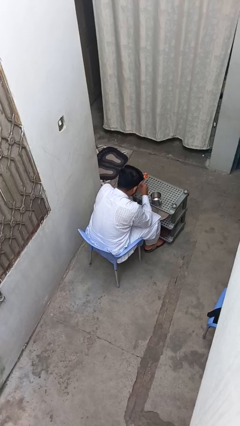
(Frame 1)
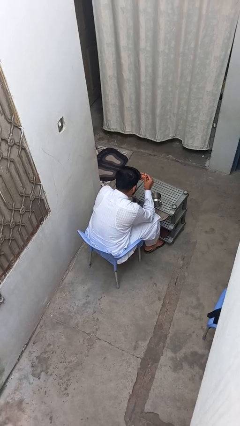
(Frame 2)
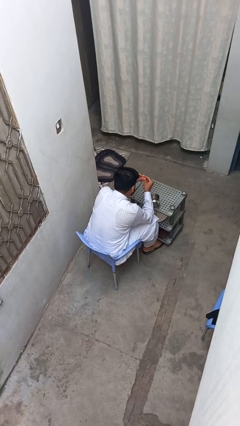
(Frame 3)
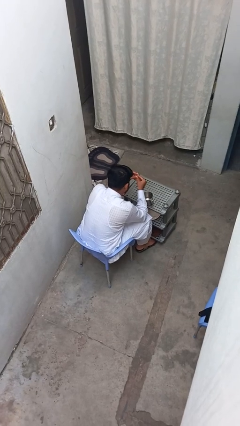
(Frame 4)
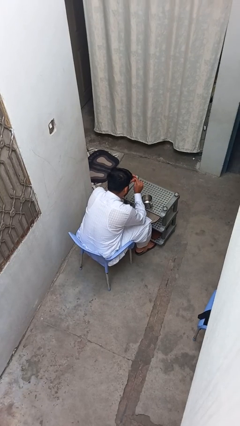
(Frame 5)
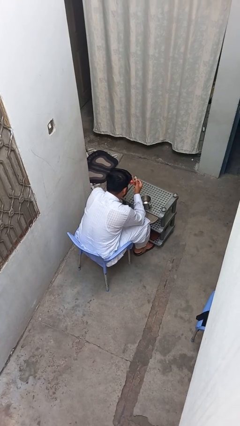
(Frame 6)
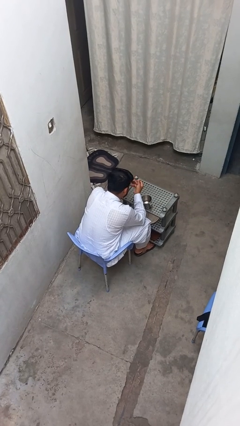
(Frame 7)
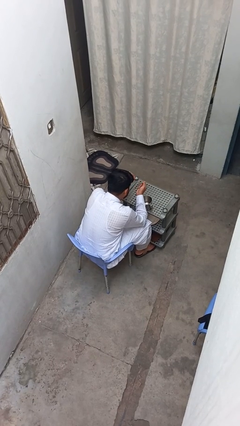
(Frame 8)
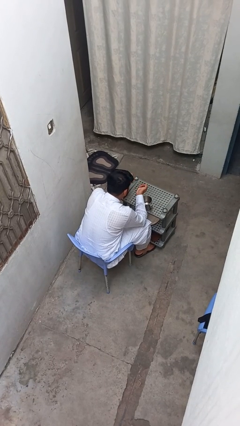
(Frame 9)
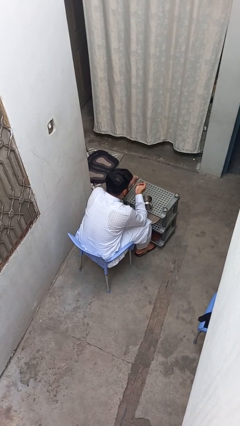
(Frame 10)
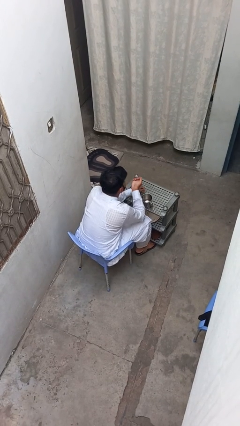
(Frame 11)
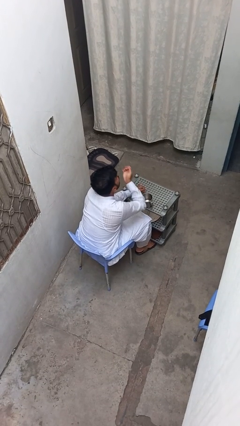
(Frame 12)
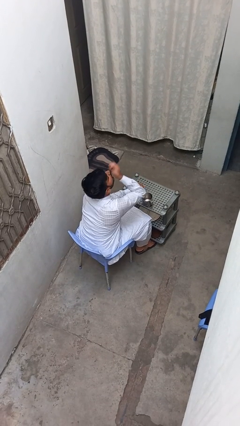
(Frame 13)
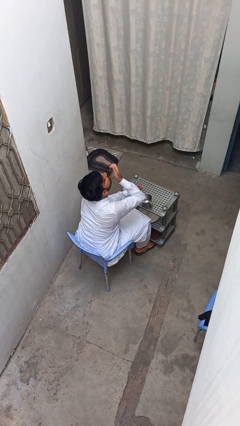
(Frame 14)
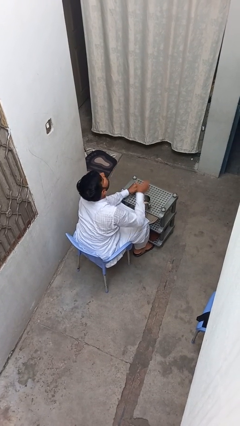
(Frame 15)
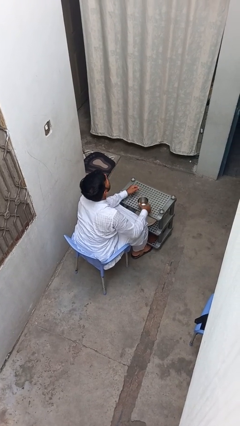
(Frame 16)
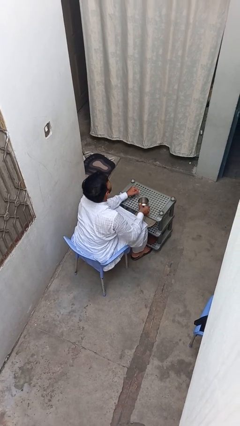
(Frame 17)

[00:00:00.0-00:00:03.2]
person takes medicine pills

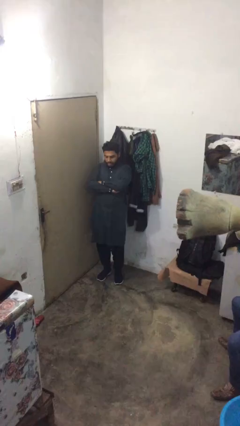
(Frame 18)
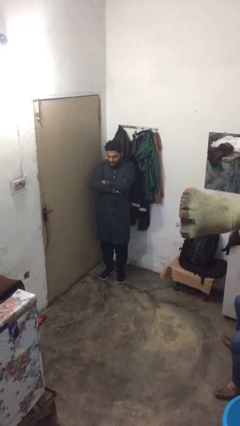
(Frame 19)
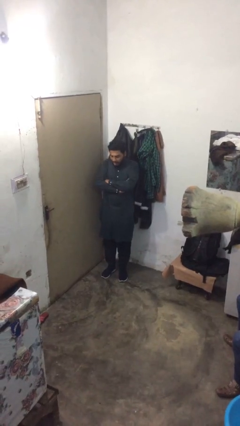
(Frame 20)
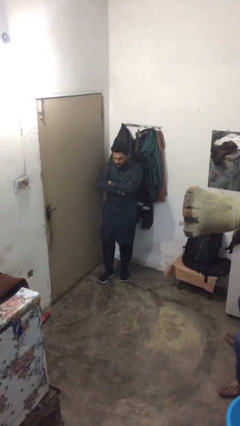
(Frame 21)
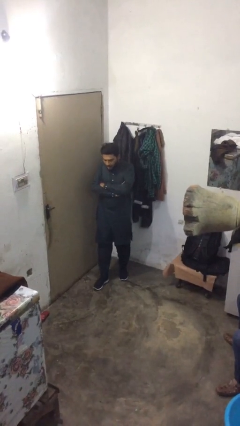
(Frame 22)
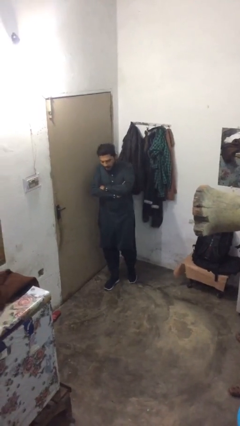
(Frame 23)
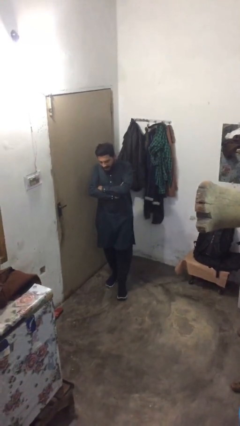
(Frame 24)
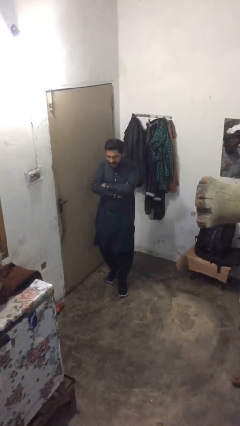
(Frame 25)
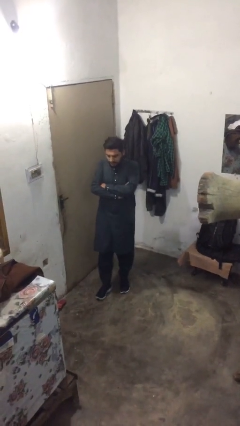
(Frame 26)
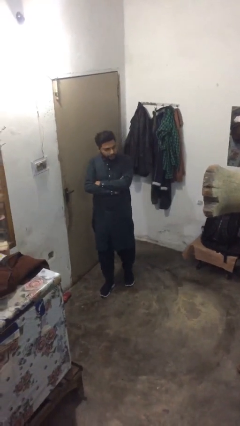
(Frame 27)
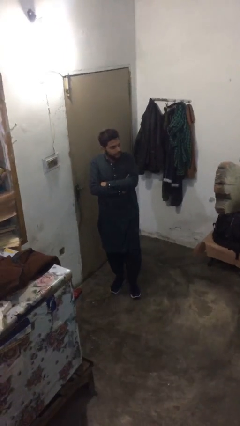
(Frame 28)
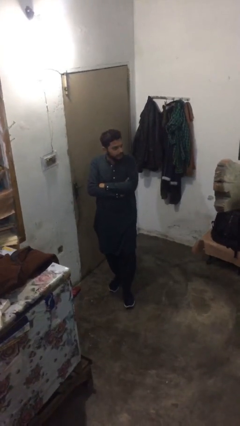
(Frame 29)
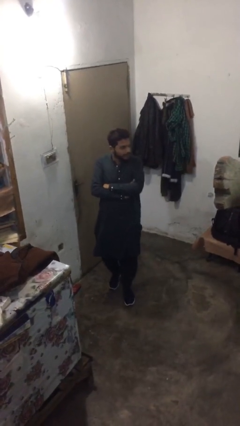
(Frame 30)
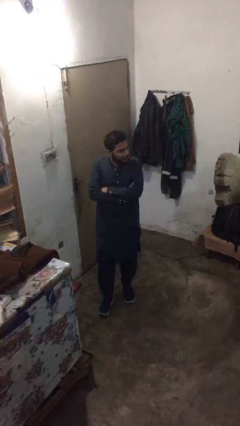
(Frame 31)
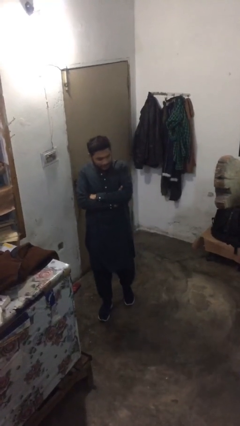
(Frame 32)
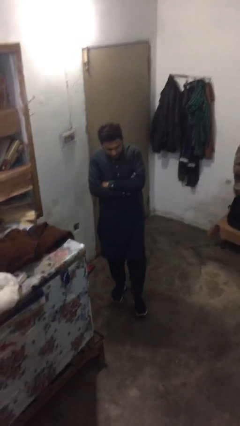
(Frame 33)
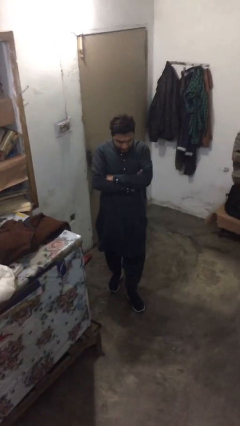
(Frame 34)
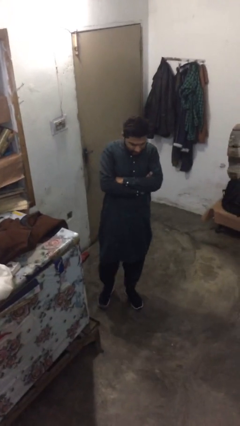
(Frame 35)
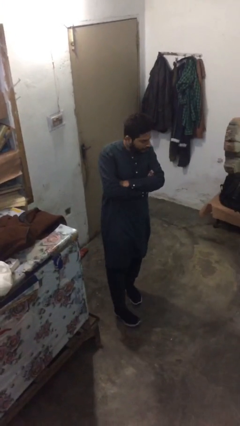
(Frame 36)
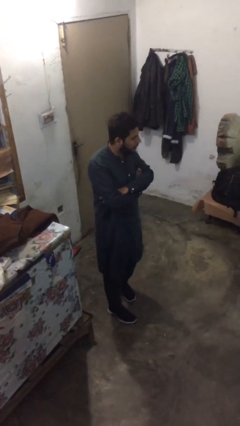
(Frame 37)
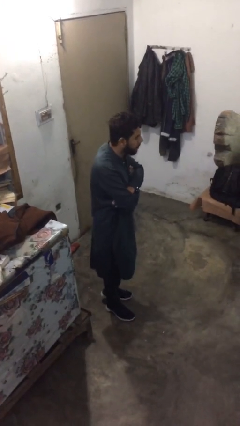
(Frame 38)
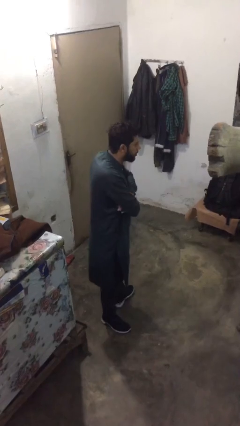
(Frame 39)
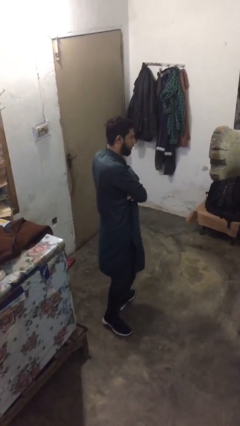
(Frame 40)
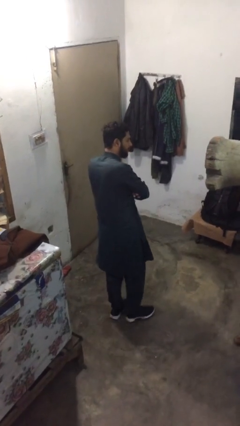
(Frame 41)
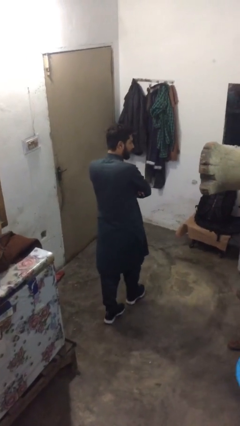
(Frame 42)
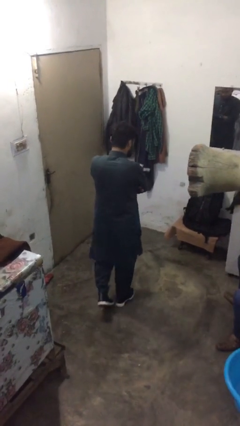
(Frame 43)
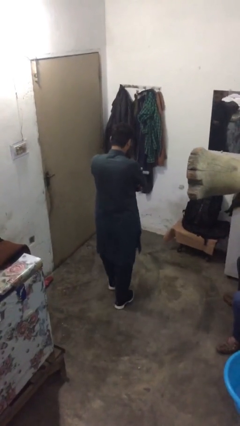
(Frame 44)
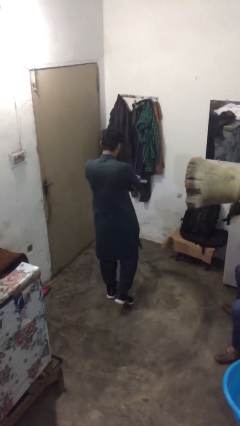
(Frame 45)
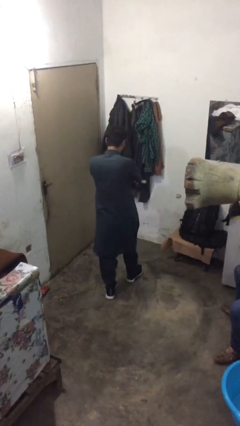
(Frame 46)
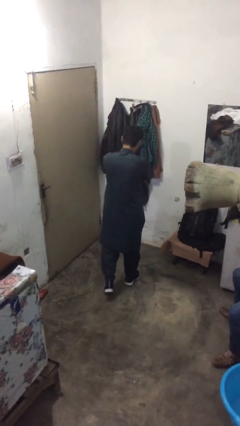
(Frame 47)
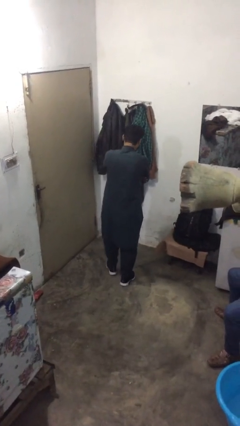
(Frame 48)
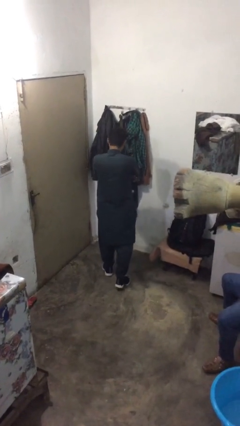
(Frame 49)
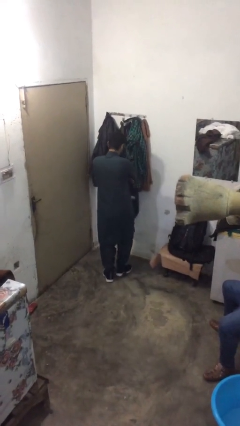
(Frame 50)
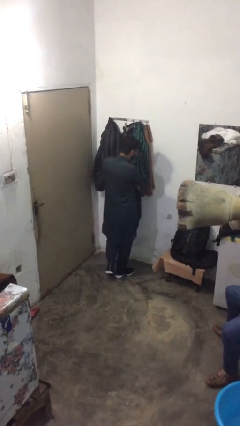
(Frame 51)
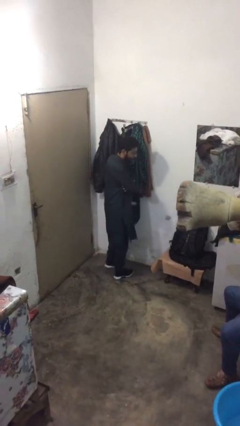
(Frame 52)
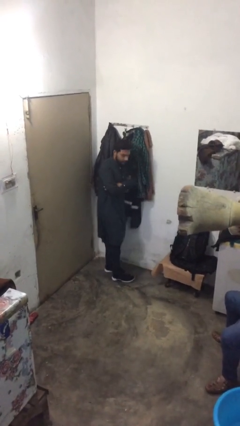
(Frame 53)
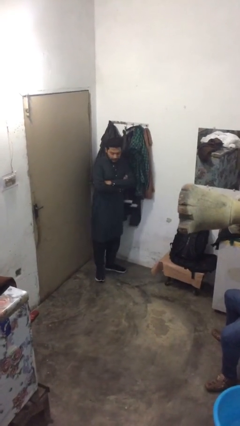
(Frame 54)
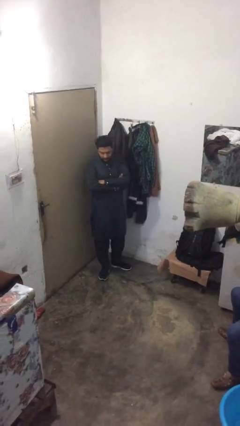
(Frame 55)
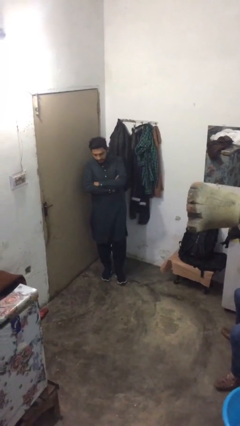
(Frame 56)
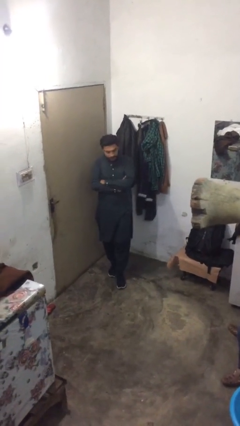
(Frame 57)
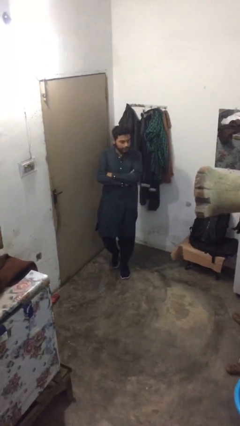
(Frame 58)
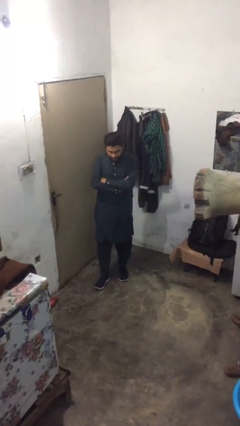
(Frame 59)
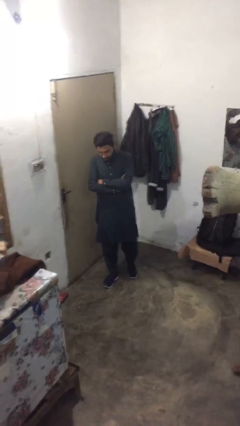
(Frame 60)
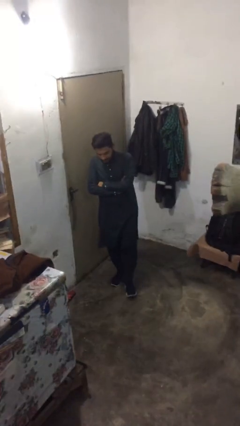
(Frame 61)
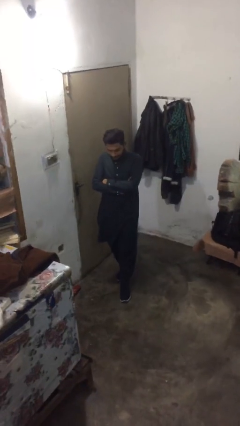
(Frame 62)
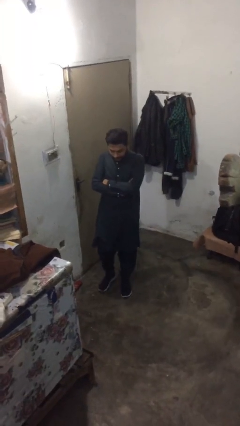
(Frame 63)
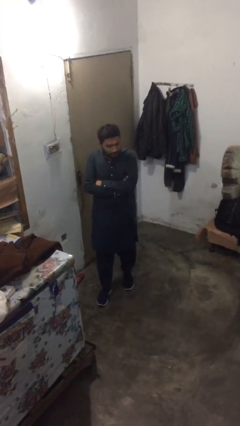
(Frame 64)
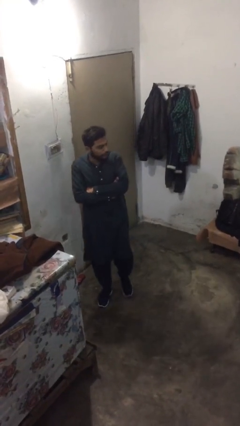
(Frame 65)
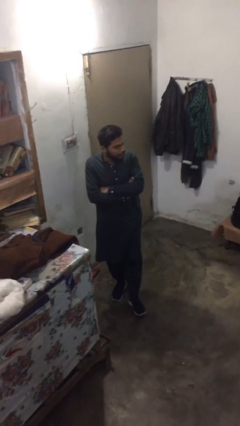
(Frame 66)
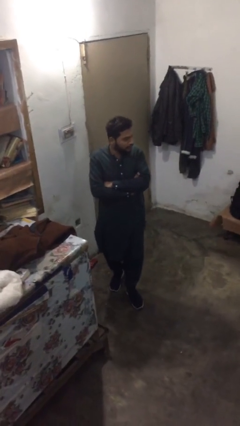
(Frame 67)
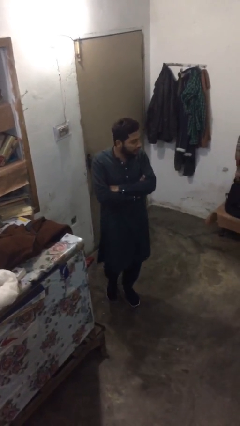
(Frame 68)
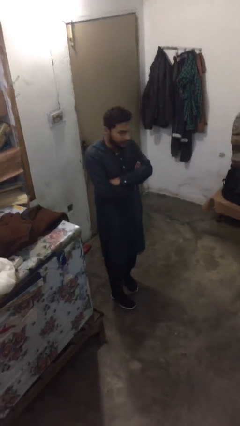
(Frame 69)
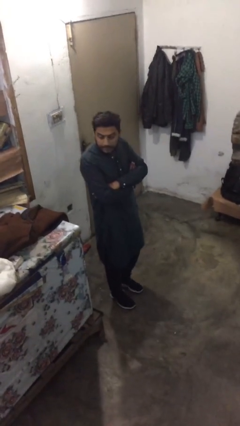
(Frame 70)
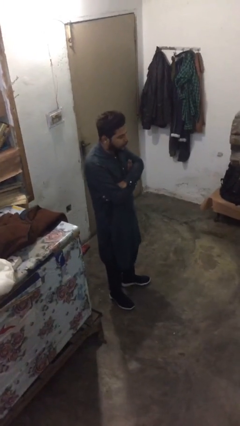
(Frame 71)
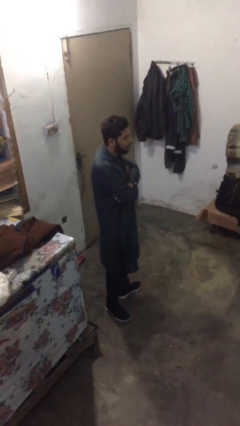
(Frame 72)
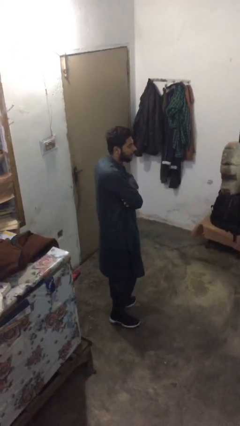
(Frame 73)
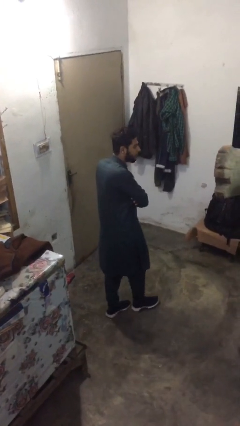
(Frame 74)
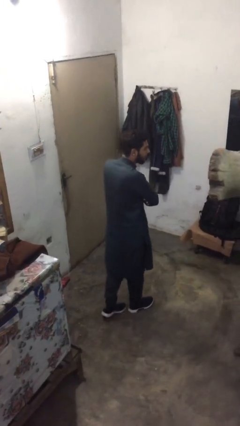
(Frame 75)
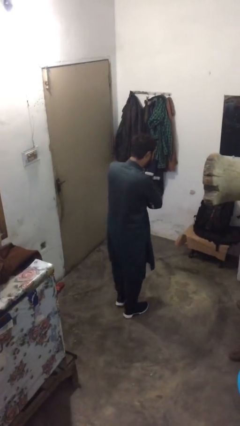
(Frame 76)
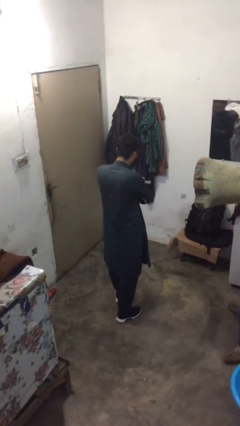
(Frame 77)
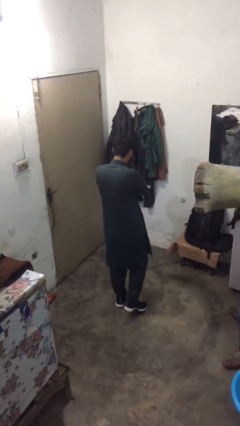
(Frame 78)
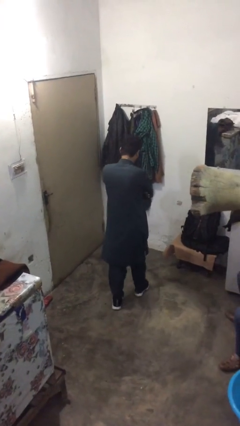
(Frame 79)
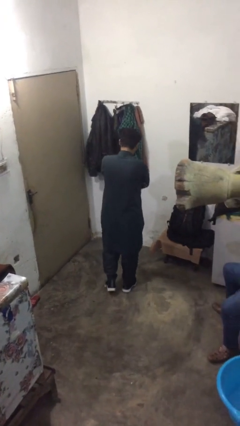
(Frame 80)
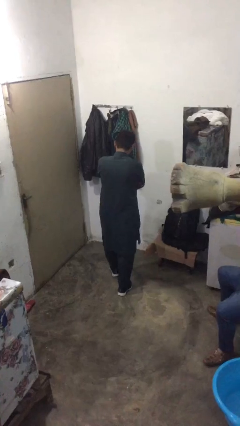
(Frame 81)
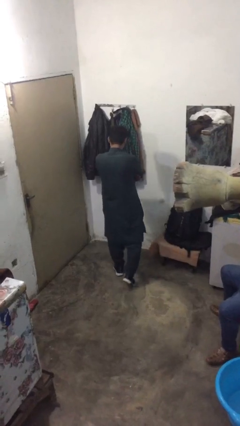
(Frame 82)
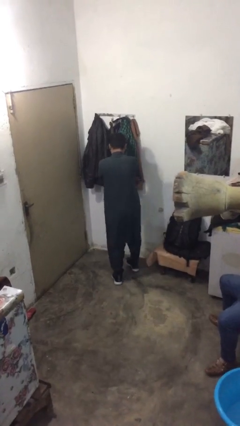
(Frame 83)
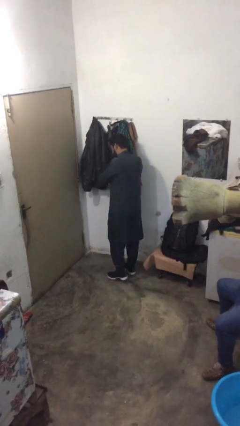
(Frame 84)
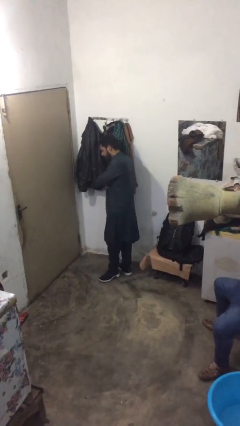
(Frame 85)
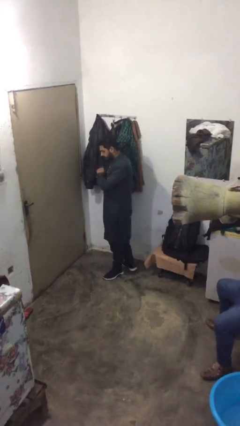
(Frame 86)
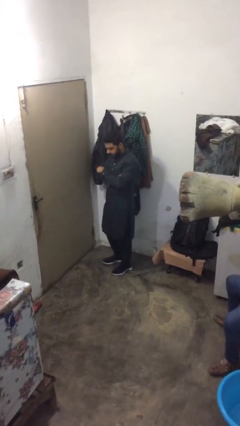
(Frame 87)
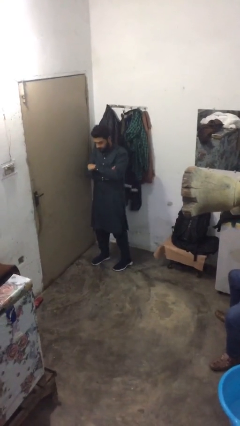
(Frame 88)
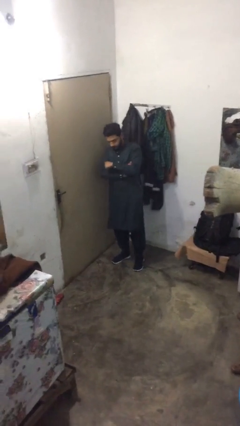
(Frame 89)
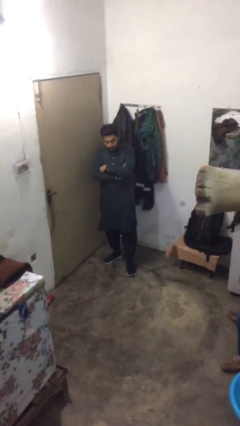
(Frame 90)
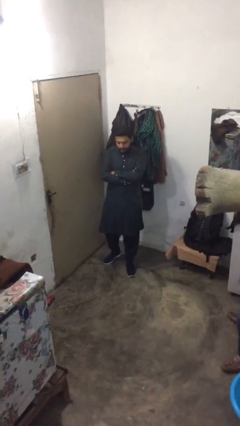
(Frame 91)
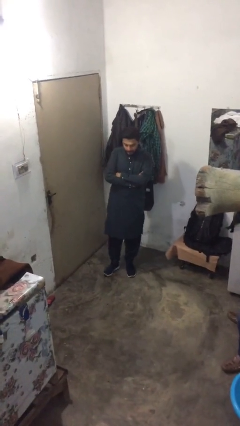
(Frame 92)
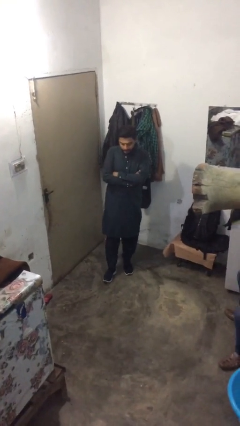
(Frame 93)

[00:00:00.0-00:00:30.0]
person walks
